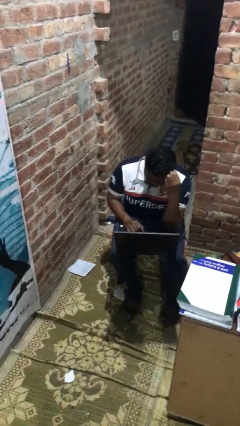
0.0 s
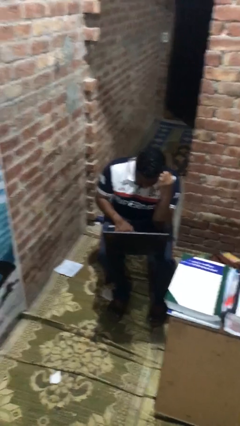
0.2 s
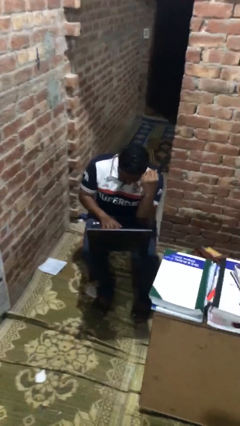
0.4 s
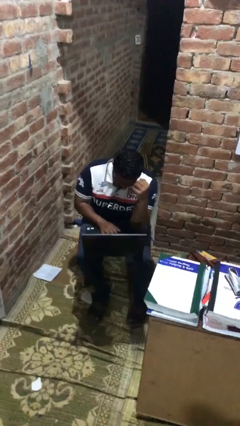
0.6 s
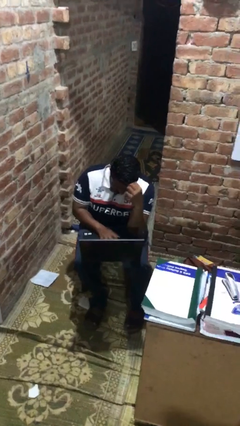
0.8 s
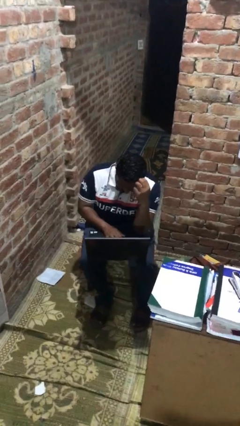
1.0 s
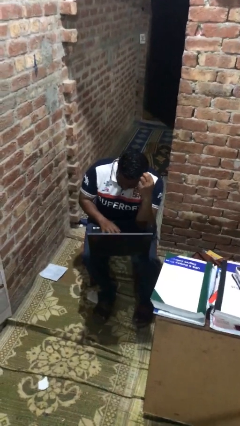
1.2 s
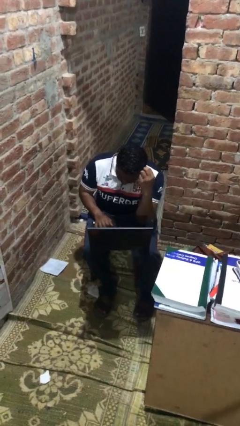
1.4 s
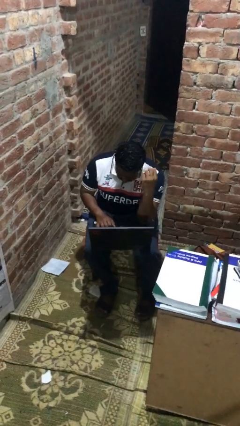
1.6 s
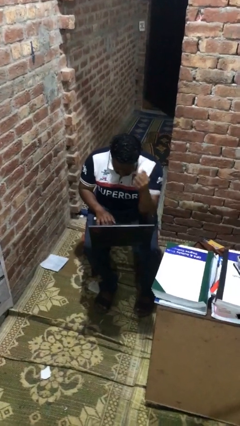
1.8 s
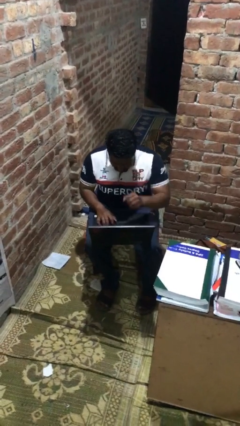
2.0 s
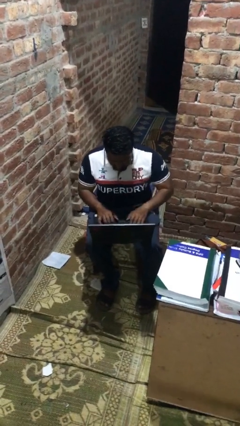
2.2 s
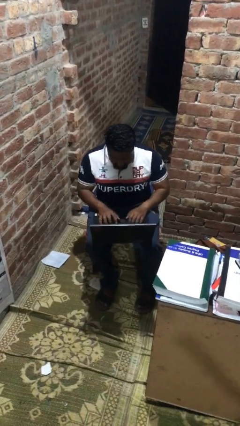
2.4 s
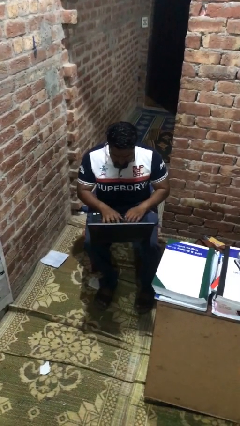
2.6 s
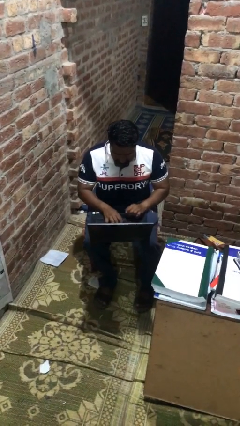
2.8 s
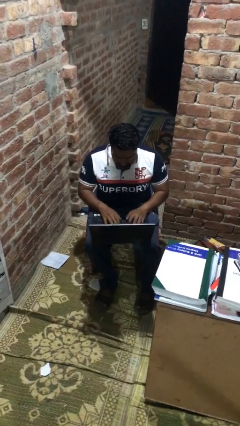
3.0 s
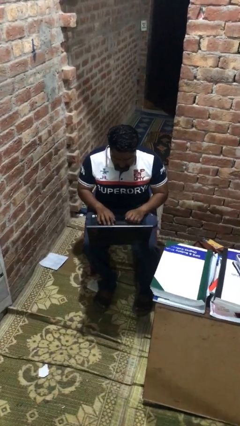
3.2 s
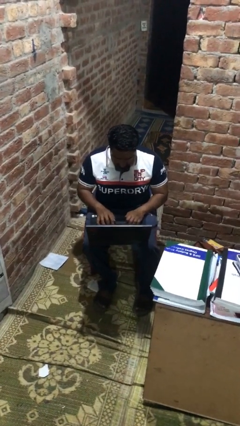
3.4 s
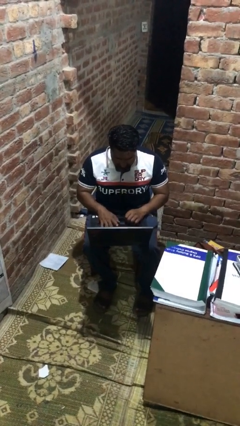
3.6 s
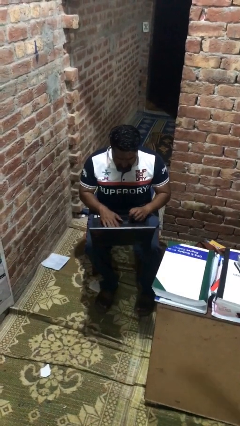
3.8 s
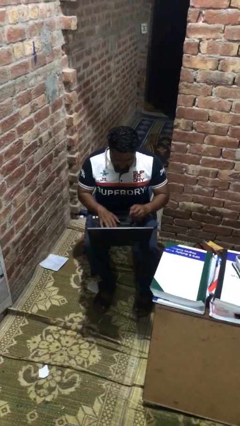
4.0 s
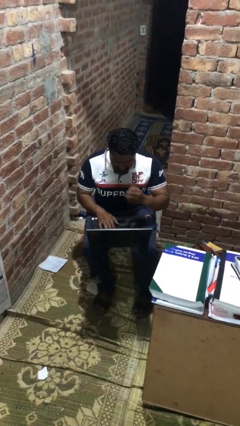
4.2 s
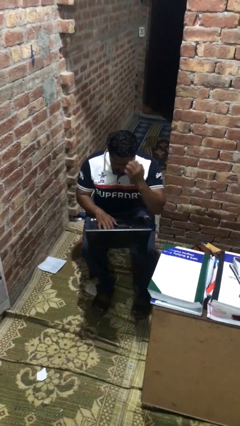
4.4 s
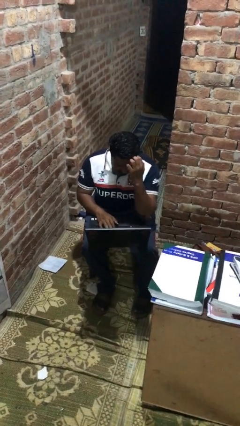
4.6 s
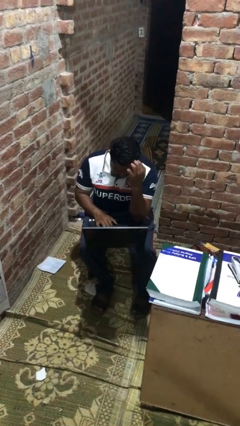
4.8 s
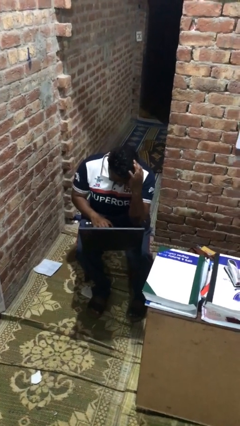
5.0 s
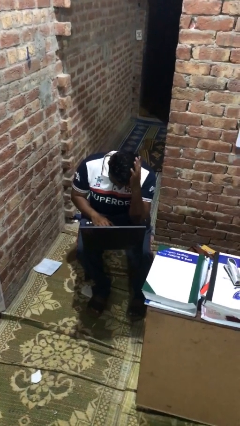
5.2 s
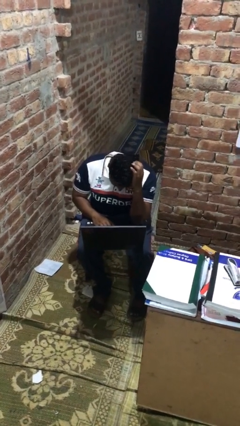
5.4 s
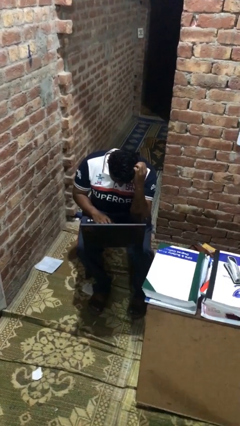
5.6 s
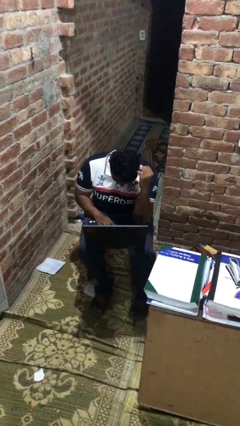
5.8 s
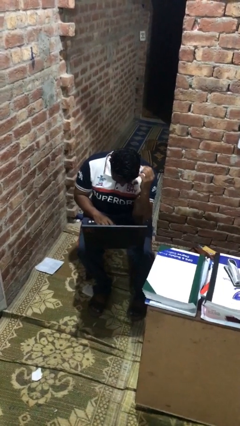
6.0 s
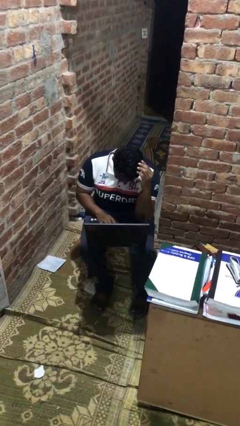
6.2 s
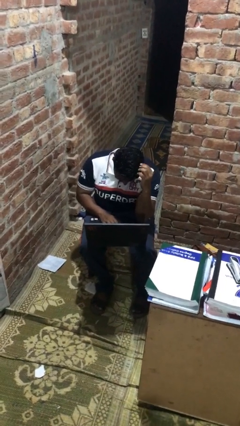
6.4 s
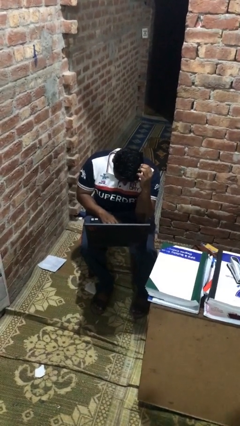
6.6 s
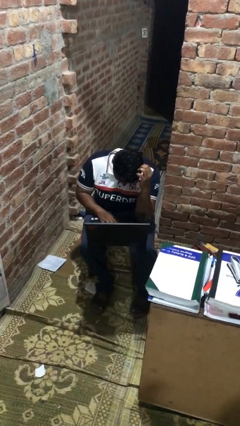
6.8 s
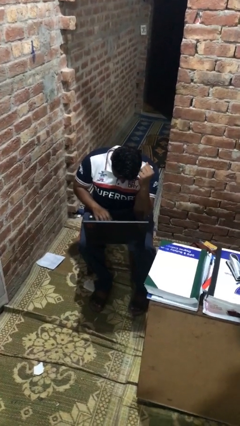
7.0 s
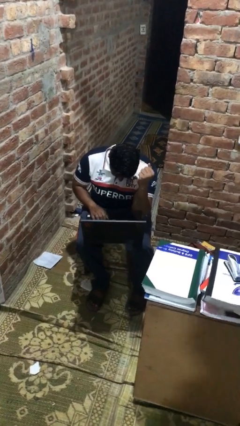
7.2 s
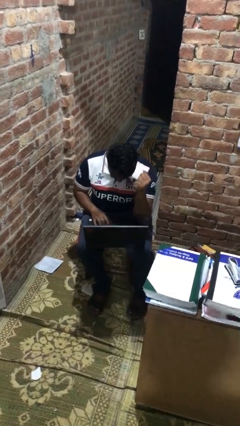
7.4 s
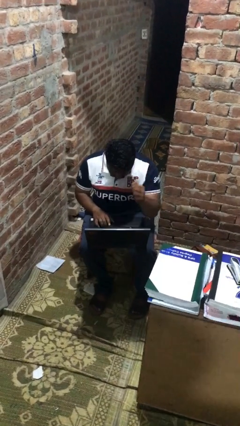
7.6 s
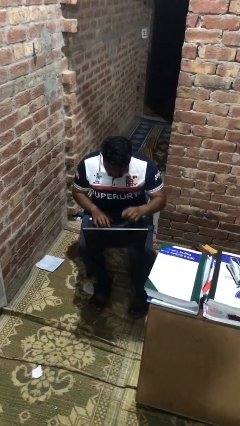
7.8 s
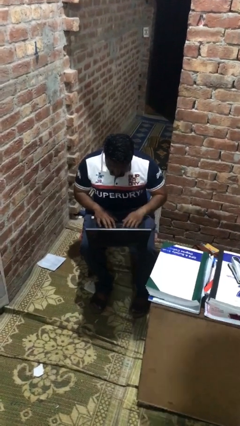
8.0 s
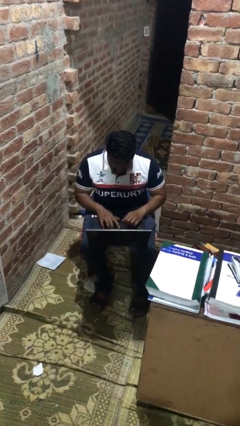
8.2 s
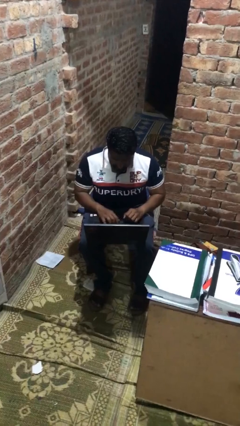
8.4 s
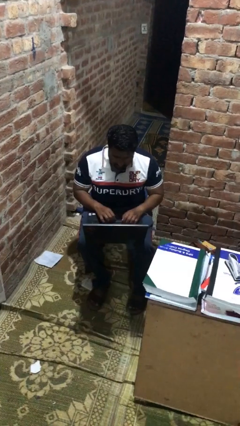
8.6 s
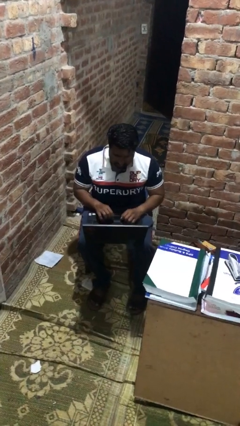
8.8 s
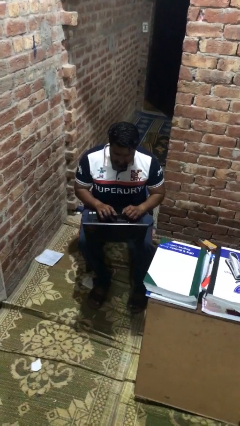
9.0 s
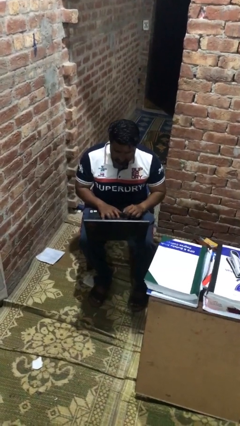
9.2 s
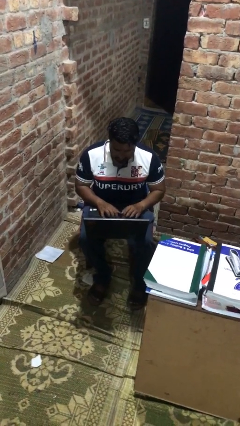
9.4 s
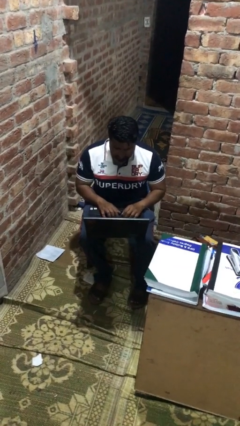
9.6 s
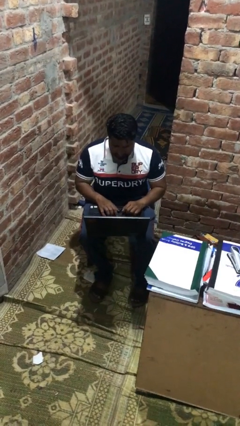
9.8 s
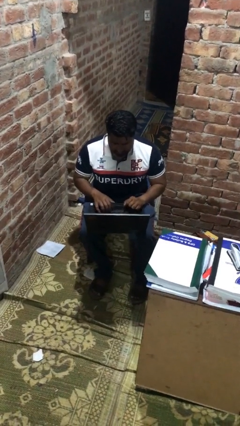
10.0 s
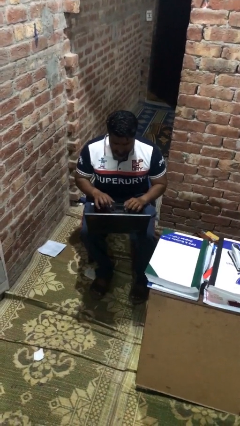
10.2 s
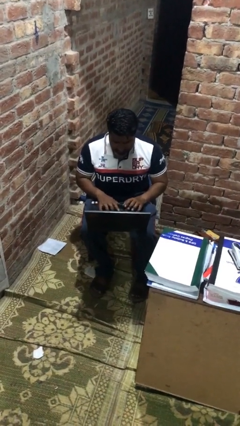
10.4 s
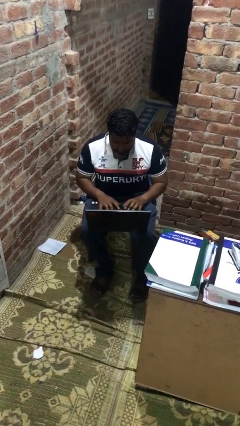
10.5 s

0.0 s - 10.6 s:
person interacts with laptop

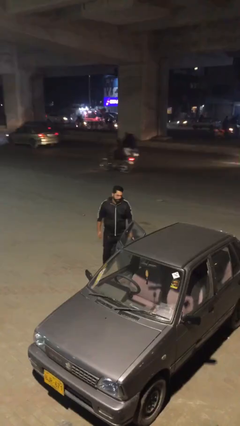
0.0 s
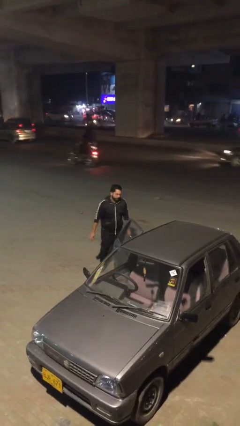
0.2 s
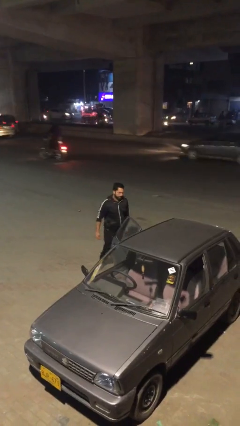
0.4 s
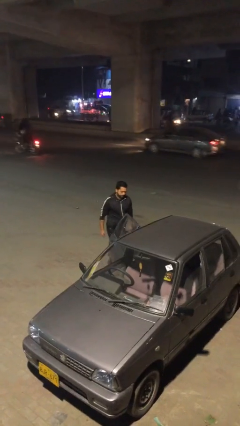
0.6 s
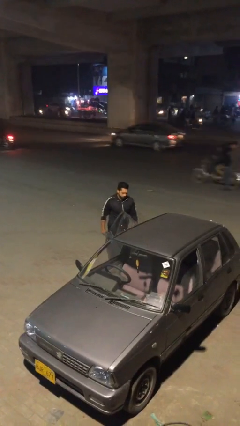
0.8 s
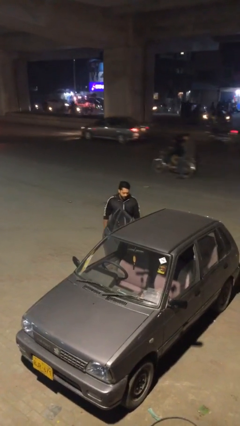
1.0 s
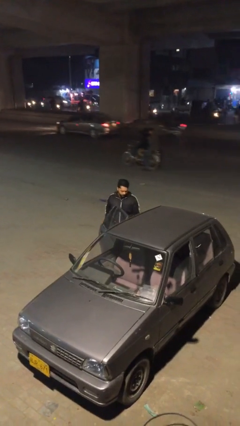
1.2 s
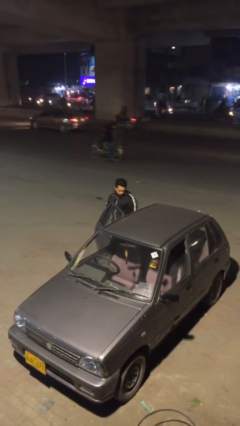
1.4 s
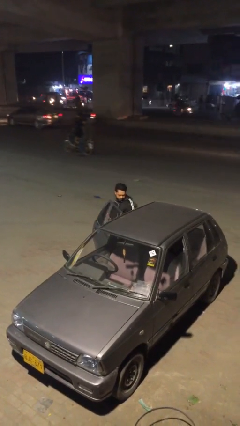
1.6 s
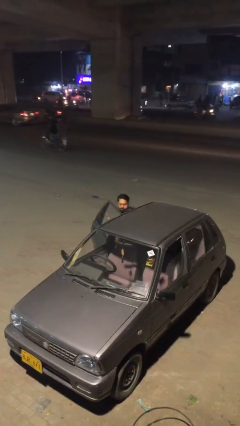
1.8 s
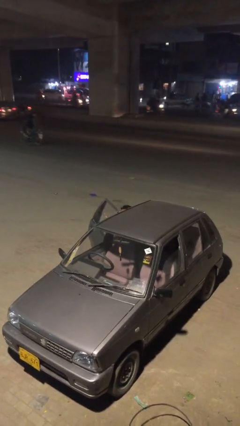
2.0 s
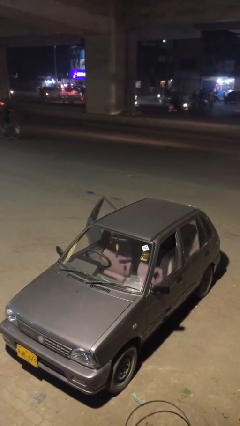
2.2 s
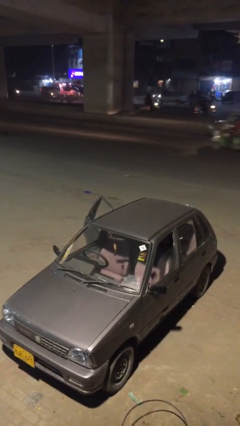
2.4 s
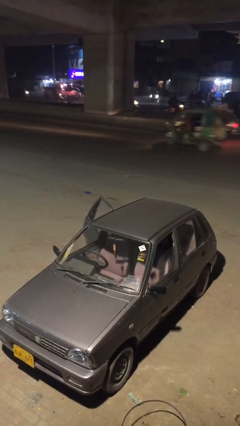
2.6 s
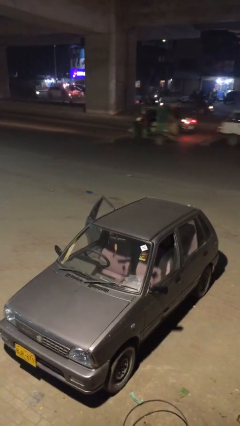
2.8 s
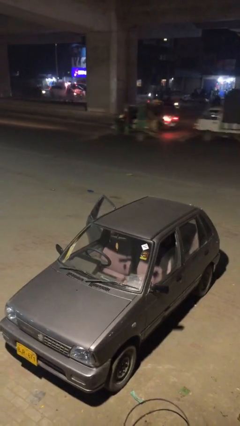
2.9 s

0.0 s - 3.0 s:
person enters car

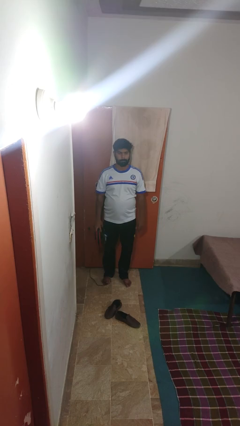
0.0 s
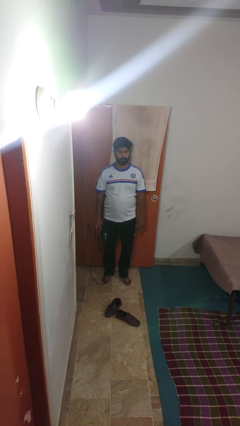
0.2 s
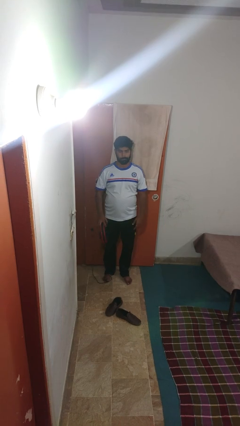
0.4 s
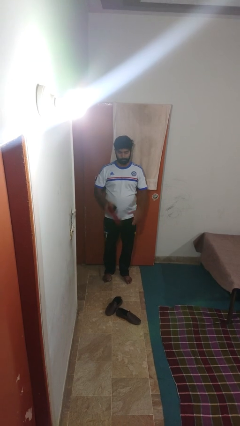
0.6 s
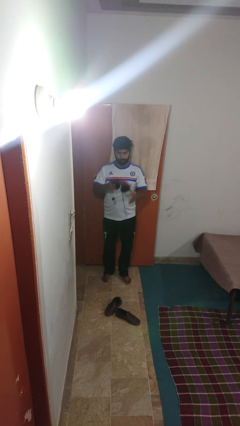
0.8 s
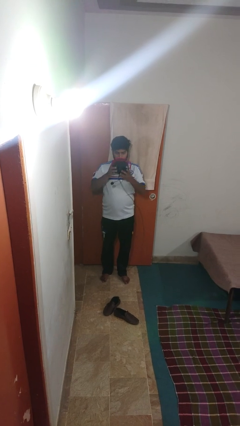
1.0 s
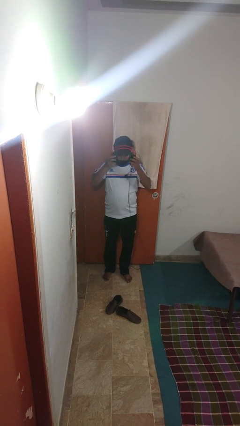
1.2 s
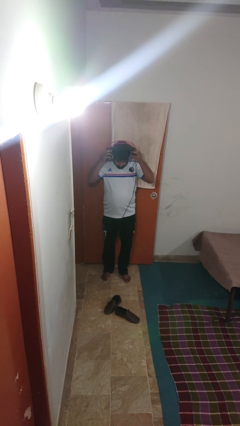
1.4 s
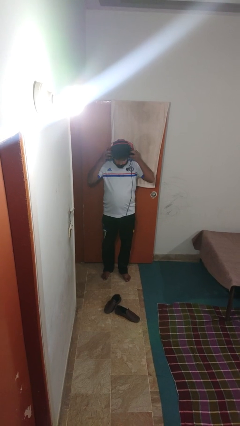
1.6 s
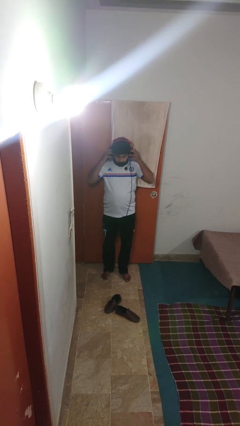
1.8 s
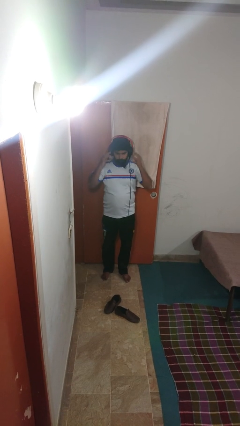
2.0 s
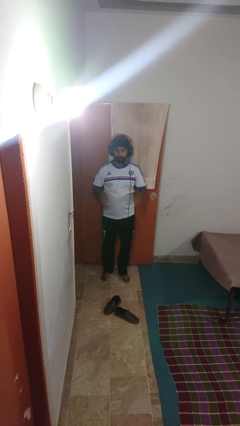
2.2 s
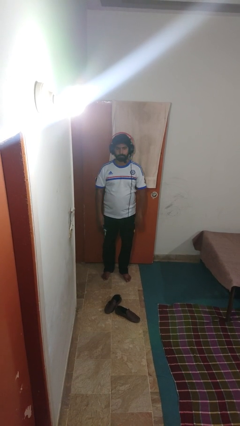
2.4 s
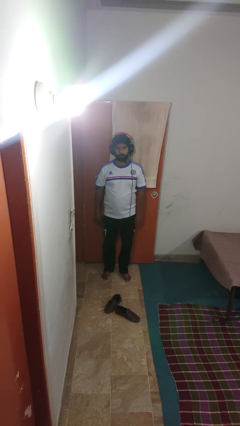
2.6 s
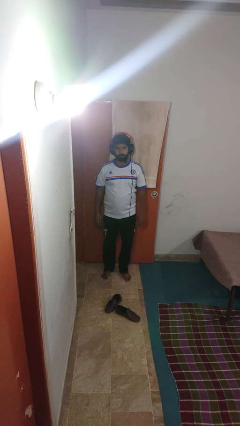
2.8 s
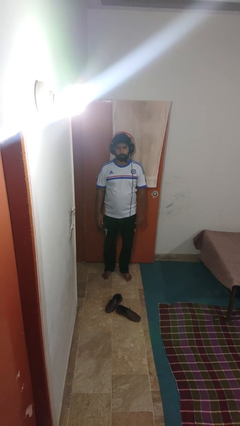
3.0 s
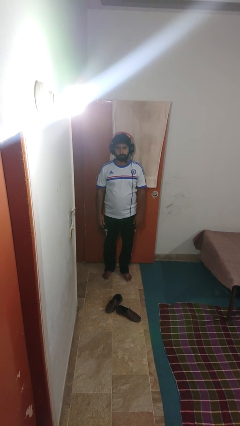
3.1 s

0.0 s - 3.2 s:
person puts on headphones

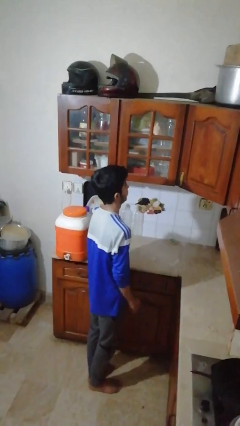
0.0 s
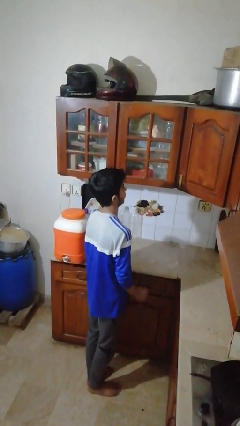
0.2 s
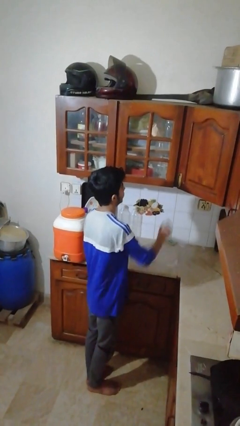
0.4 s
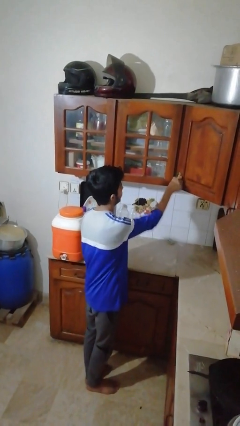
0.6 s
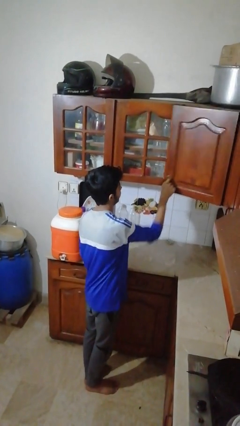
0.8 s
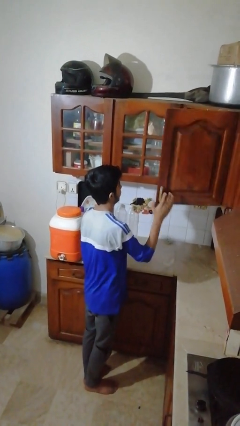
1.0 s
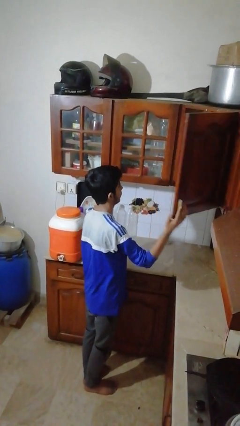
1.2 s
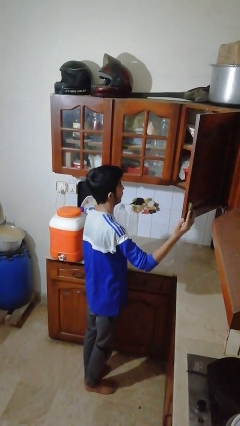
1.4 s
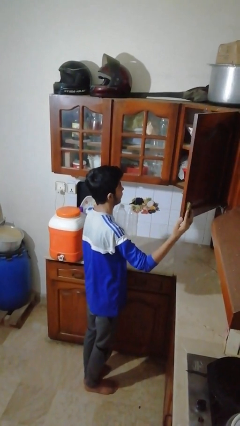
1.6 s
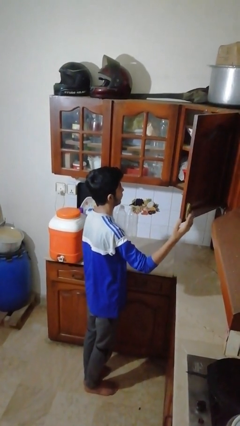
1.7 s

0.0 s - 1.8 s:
person opens cabinet
